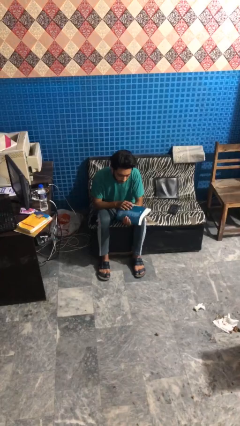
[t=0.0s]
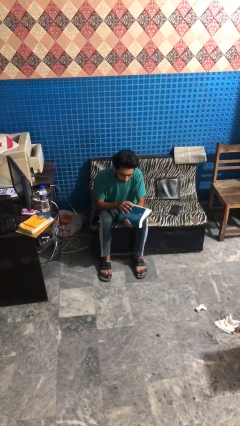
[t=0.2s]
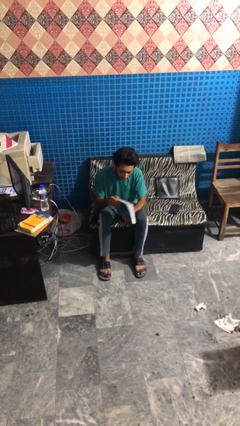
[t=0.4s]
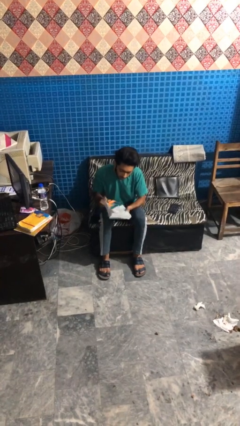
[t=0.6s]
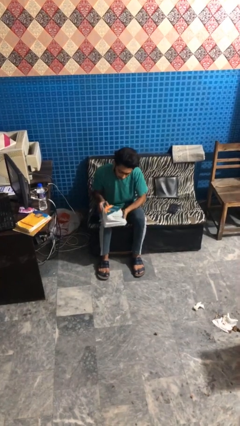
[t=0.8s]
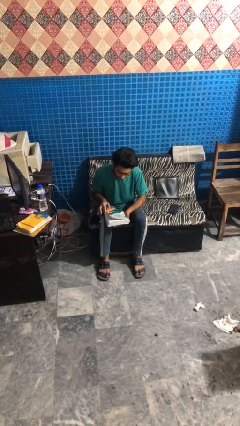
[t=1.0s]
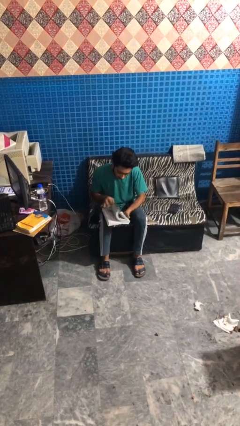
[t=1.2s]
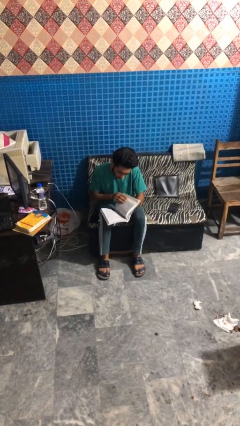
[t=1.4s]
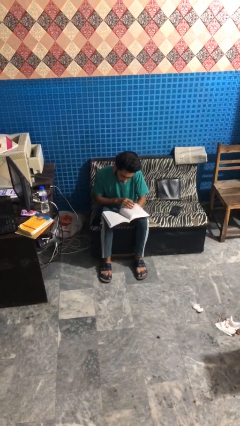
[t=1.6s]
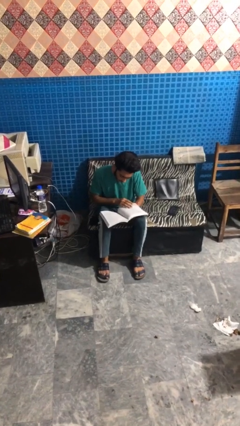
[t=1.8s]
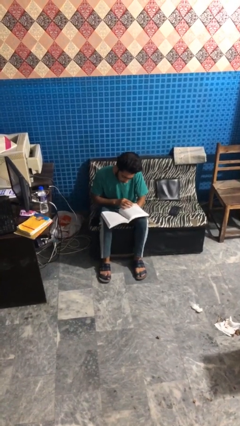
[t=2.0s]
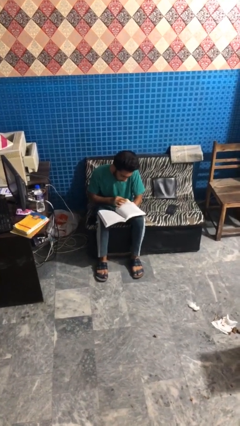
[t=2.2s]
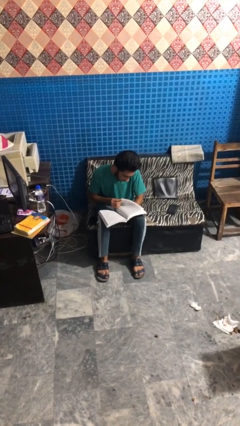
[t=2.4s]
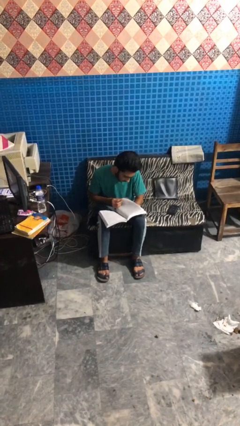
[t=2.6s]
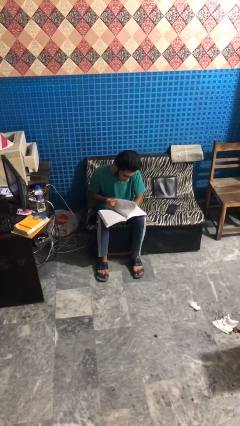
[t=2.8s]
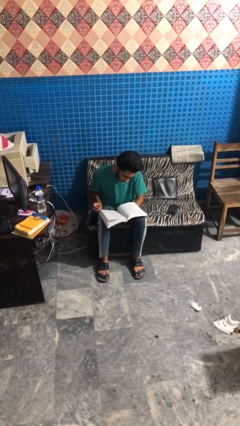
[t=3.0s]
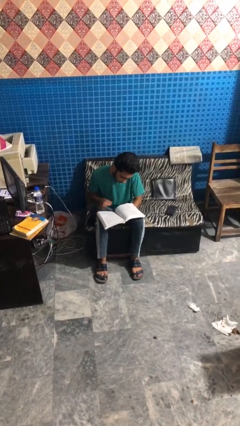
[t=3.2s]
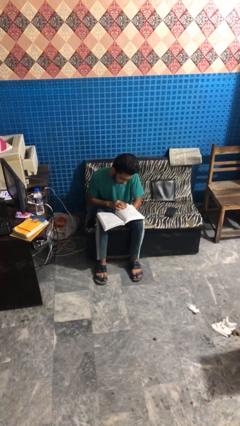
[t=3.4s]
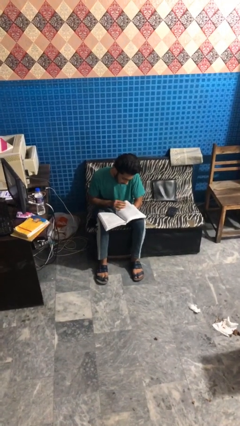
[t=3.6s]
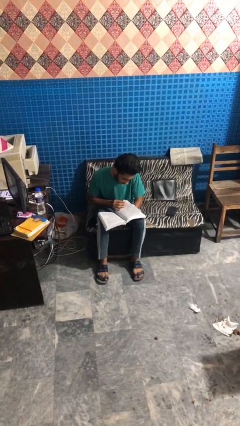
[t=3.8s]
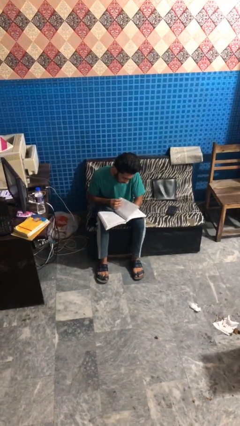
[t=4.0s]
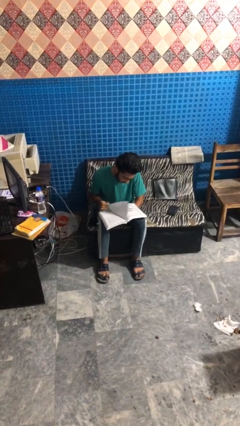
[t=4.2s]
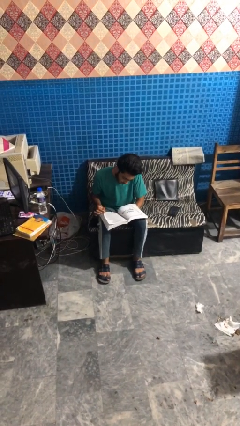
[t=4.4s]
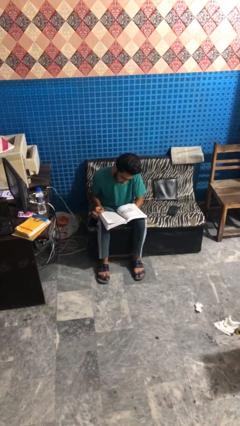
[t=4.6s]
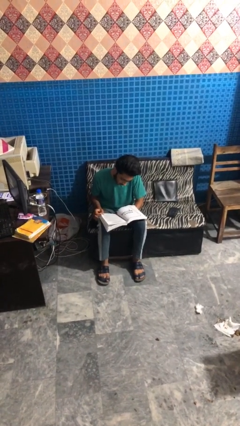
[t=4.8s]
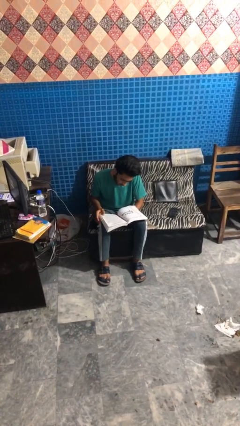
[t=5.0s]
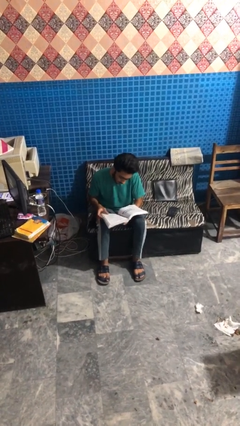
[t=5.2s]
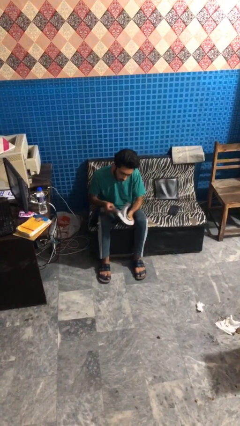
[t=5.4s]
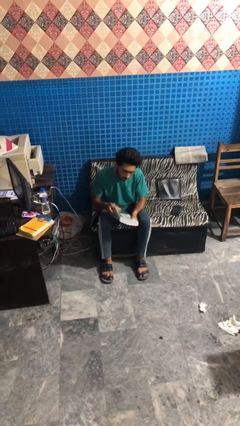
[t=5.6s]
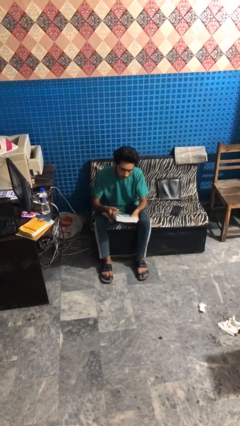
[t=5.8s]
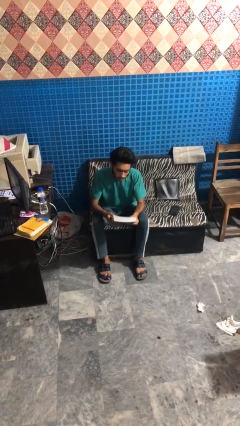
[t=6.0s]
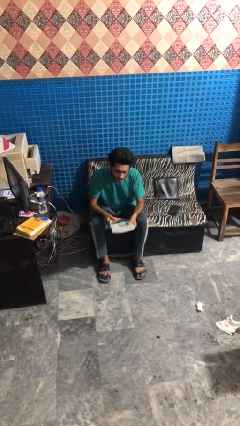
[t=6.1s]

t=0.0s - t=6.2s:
person reads book

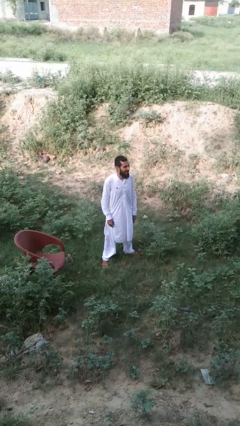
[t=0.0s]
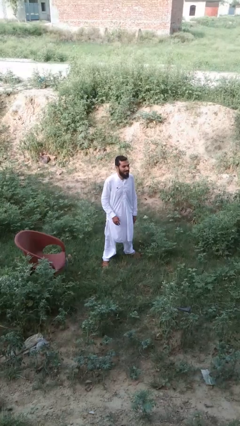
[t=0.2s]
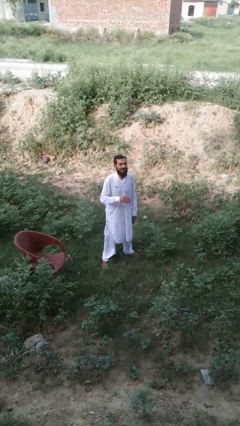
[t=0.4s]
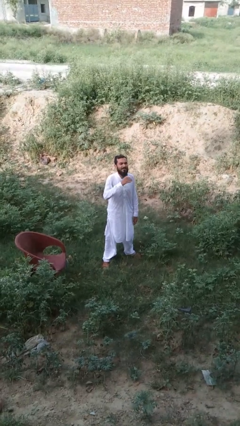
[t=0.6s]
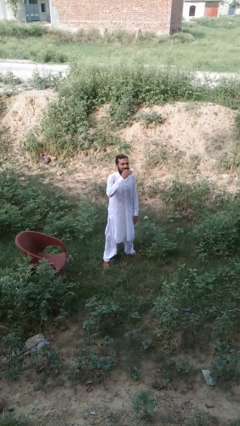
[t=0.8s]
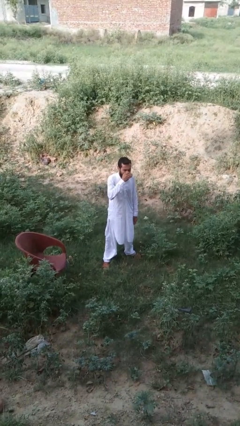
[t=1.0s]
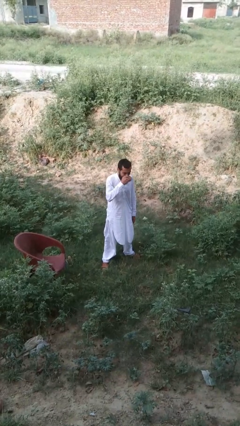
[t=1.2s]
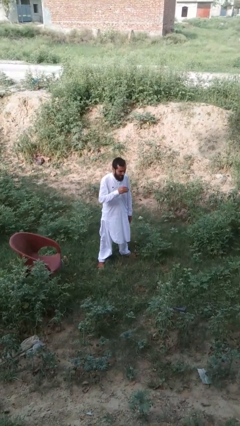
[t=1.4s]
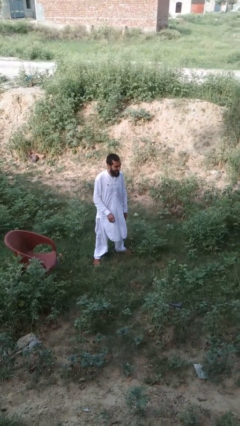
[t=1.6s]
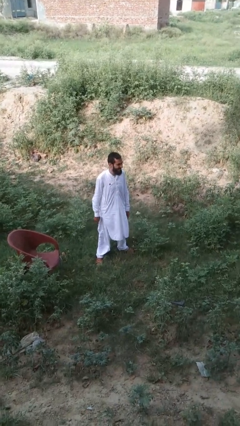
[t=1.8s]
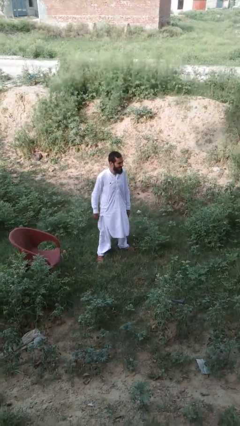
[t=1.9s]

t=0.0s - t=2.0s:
person sneezes into hand

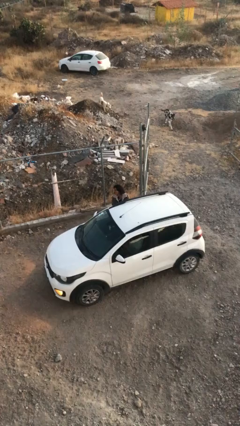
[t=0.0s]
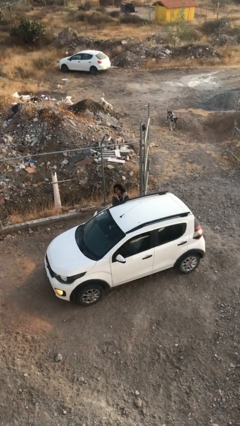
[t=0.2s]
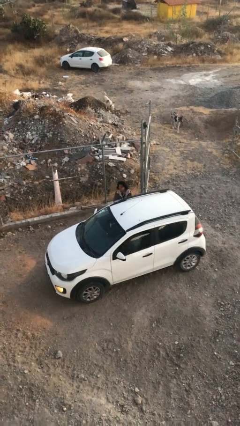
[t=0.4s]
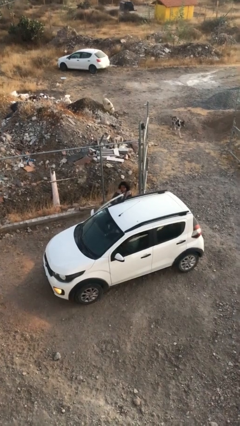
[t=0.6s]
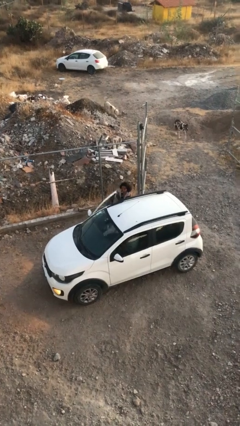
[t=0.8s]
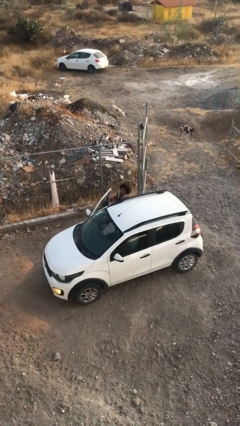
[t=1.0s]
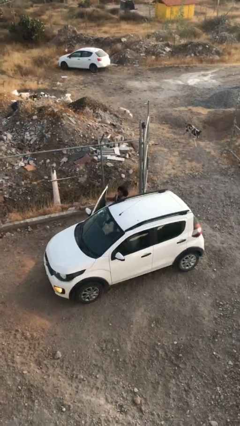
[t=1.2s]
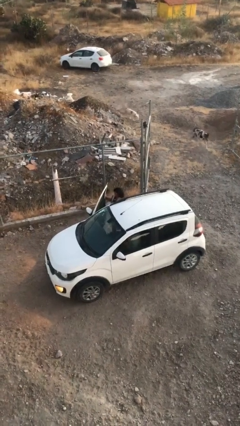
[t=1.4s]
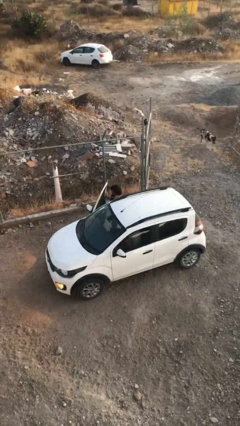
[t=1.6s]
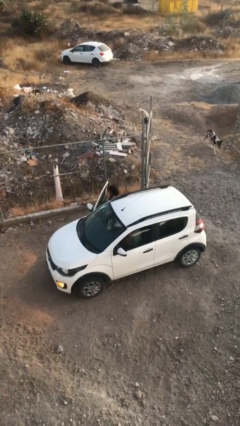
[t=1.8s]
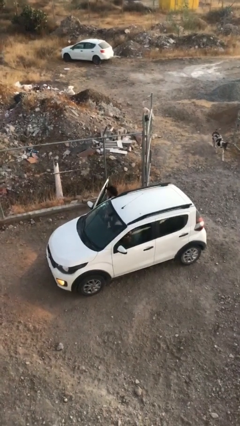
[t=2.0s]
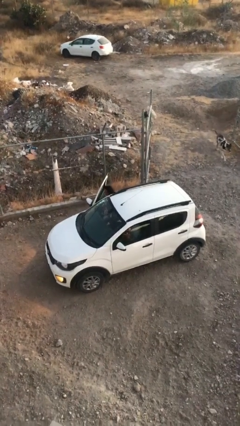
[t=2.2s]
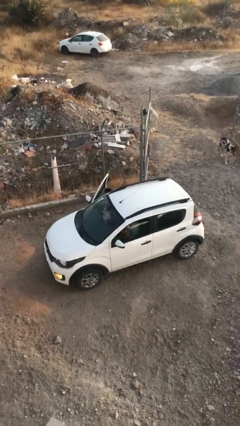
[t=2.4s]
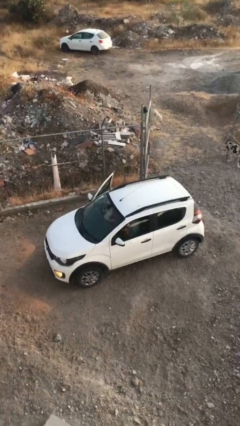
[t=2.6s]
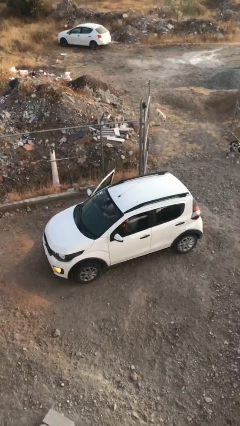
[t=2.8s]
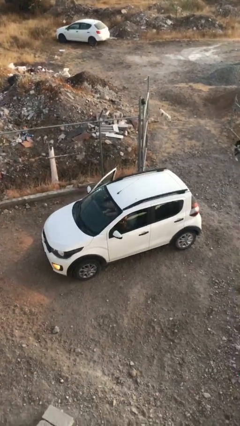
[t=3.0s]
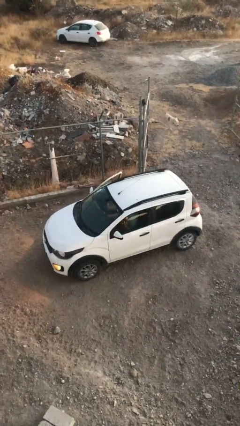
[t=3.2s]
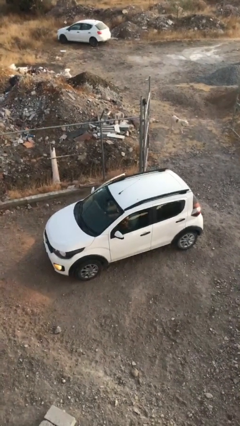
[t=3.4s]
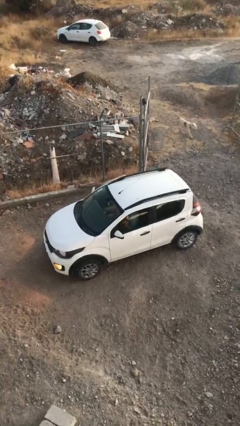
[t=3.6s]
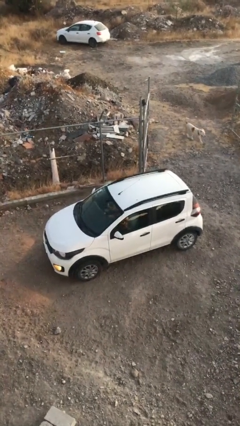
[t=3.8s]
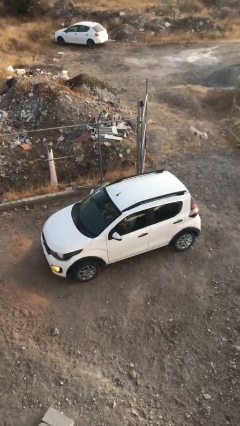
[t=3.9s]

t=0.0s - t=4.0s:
car picks up person

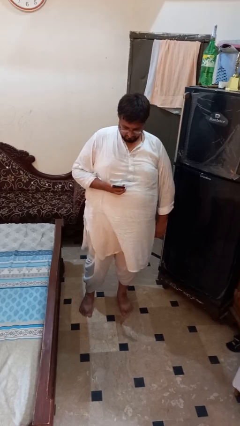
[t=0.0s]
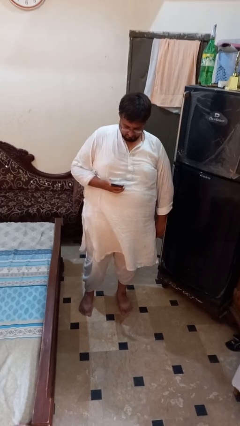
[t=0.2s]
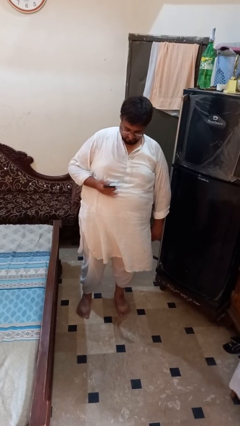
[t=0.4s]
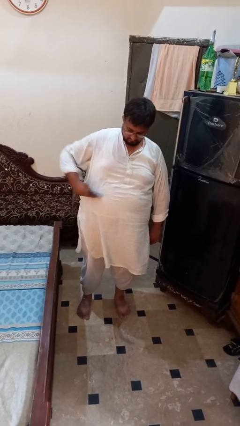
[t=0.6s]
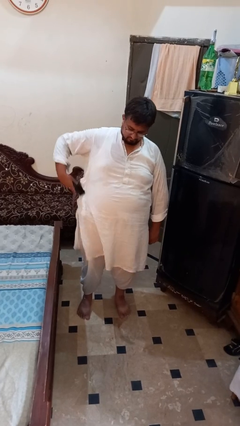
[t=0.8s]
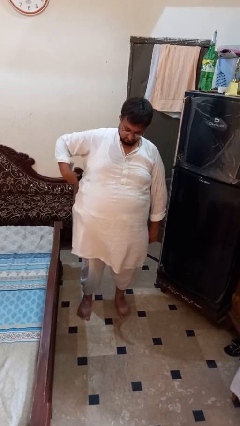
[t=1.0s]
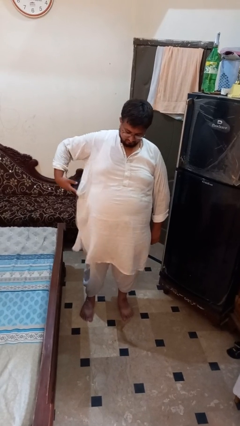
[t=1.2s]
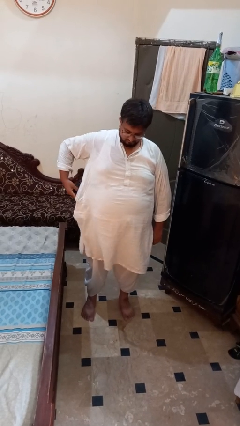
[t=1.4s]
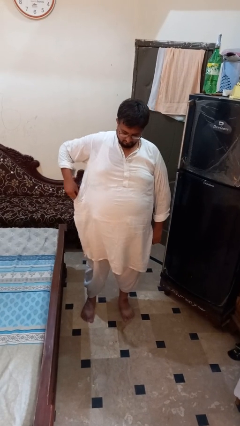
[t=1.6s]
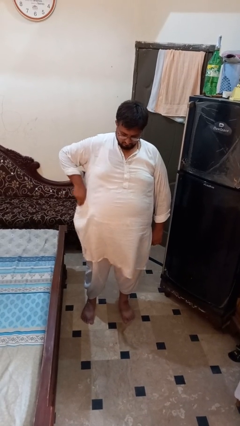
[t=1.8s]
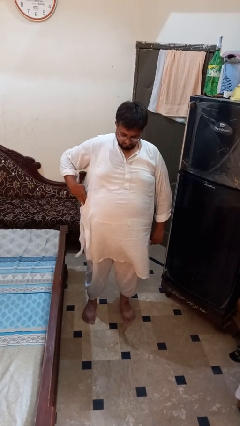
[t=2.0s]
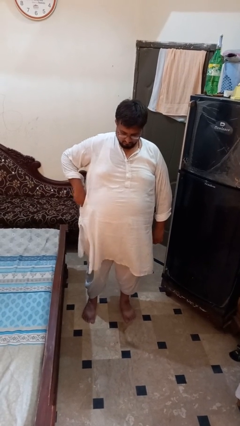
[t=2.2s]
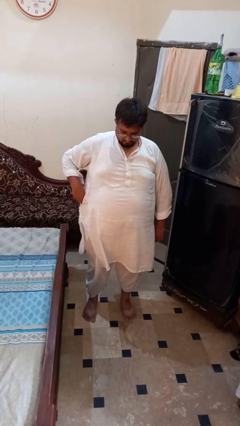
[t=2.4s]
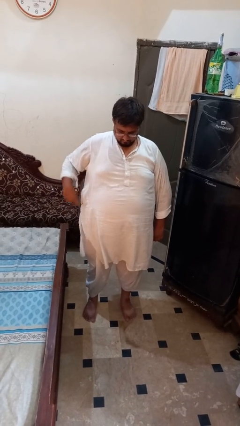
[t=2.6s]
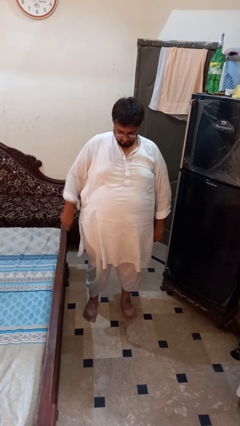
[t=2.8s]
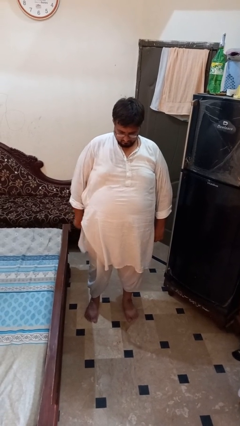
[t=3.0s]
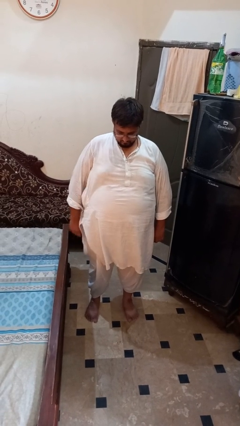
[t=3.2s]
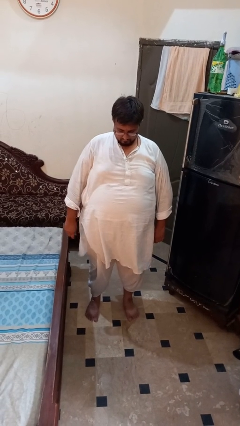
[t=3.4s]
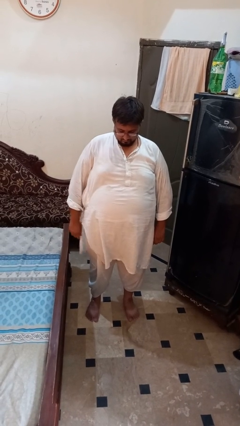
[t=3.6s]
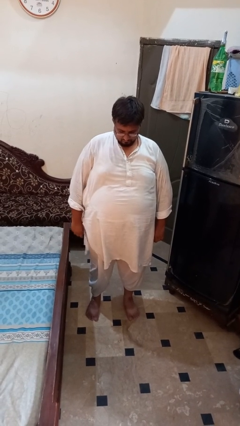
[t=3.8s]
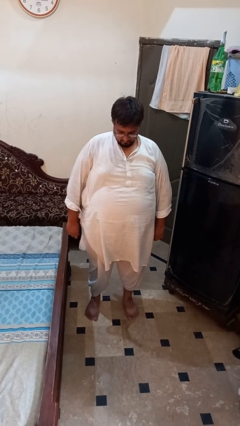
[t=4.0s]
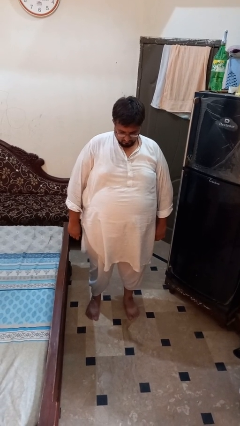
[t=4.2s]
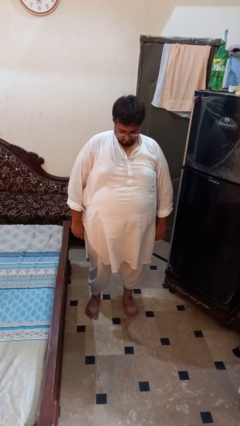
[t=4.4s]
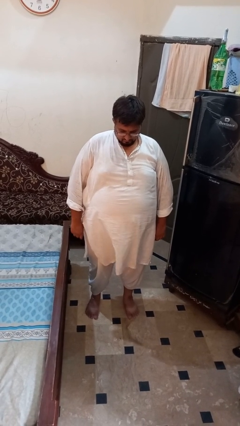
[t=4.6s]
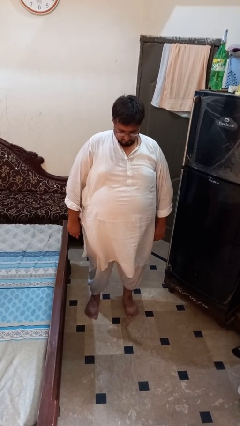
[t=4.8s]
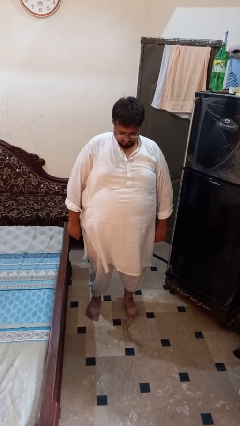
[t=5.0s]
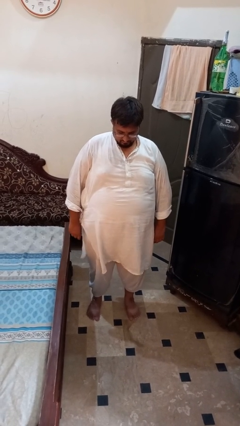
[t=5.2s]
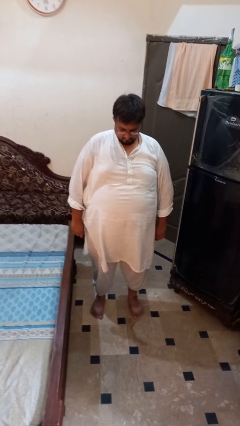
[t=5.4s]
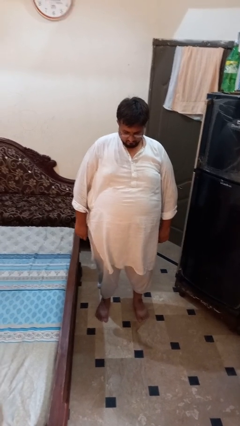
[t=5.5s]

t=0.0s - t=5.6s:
person puts phone into pocket
